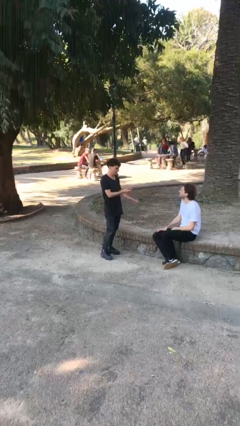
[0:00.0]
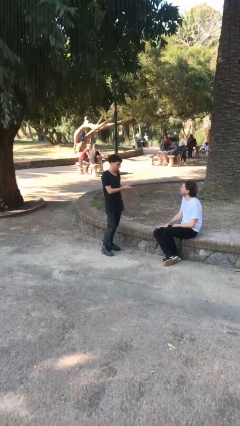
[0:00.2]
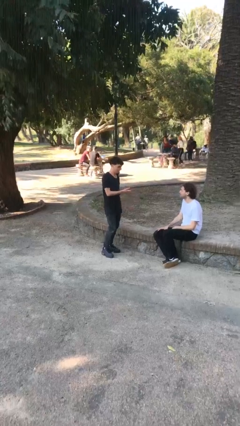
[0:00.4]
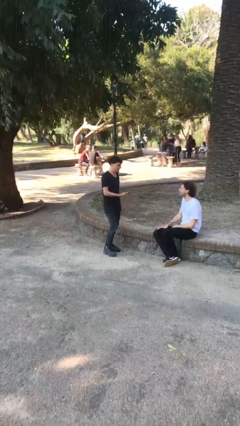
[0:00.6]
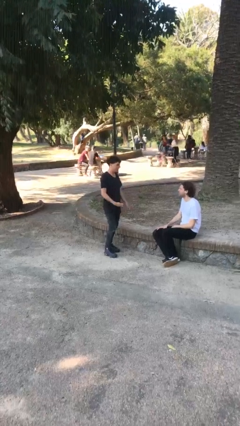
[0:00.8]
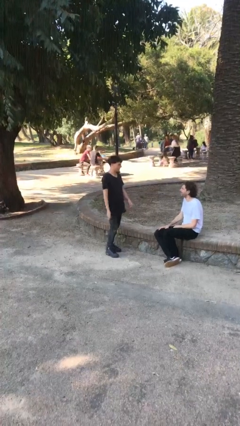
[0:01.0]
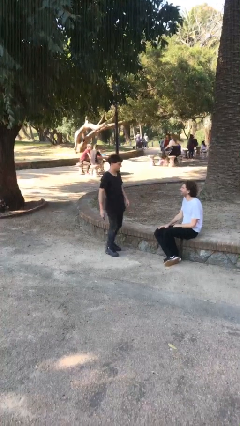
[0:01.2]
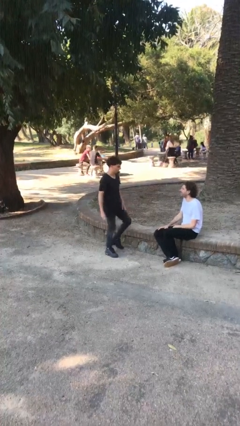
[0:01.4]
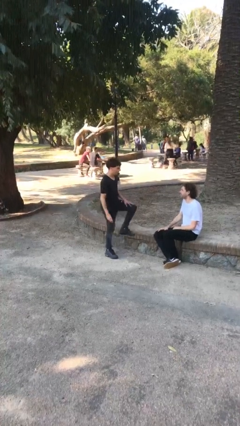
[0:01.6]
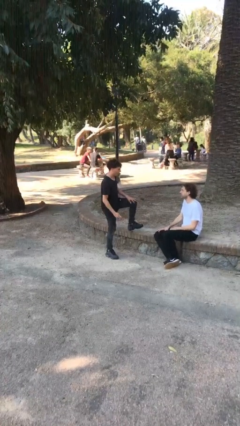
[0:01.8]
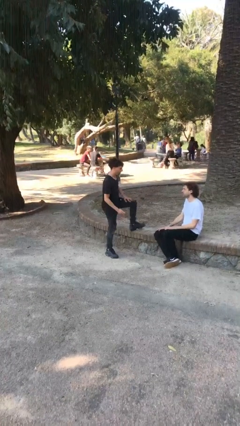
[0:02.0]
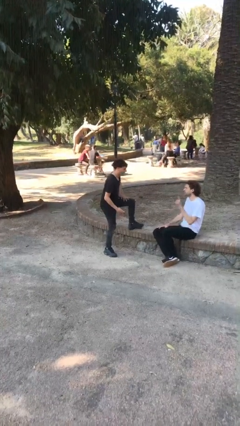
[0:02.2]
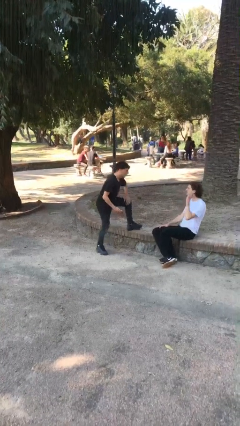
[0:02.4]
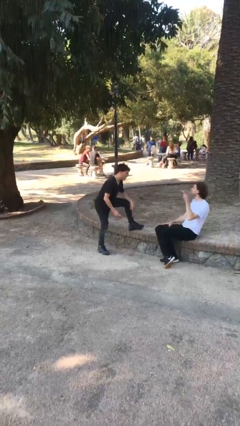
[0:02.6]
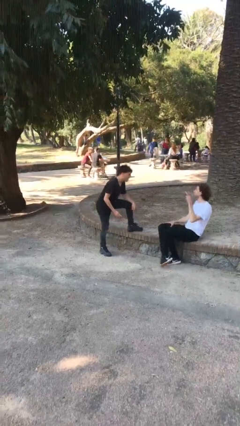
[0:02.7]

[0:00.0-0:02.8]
person talks to person

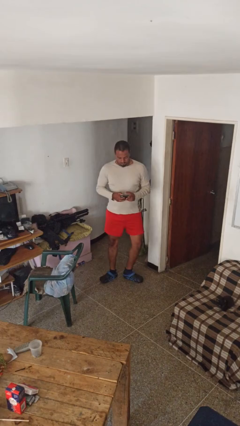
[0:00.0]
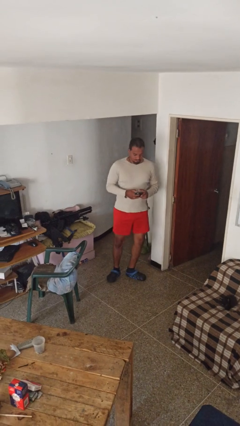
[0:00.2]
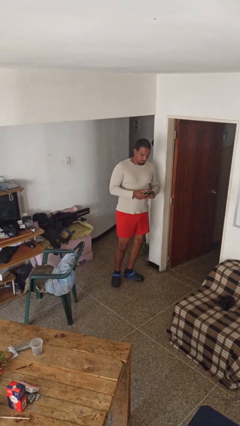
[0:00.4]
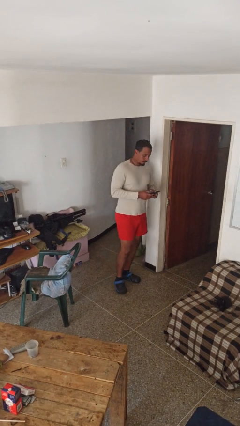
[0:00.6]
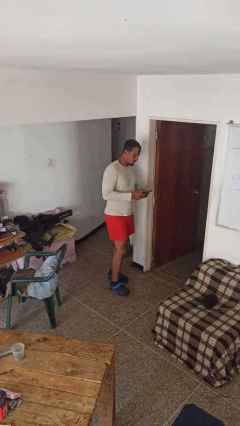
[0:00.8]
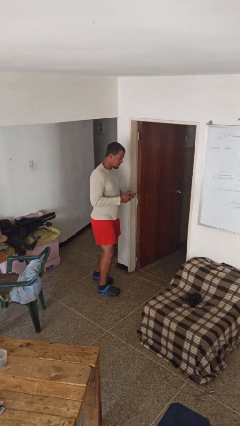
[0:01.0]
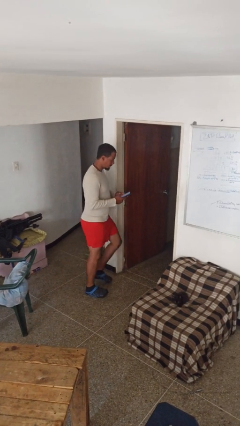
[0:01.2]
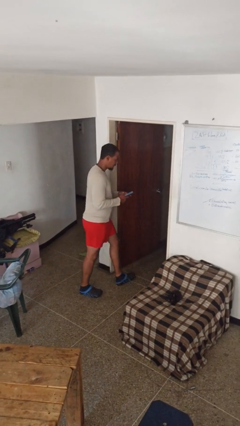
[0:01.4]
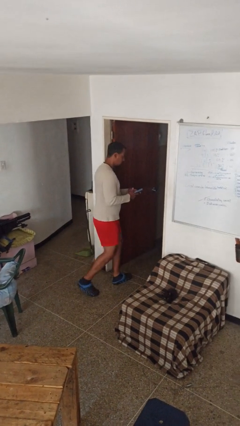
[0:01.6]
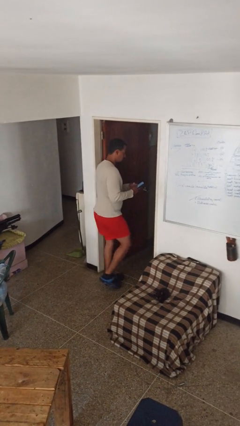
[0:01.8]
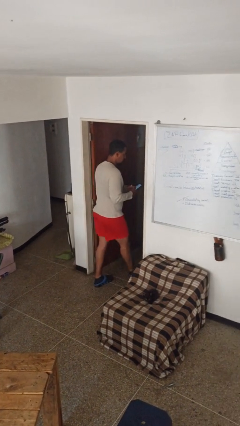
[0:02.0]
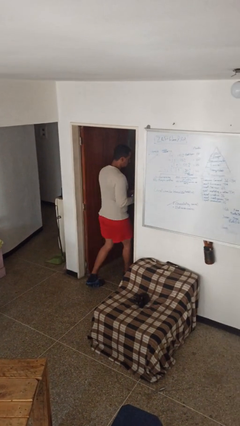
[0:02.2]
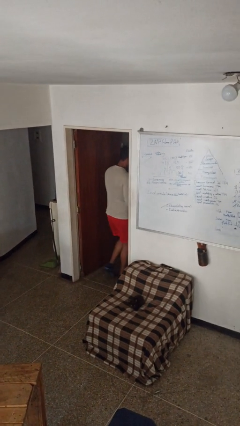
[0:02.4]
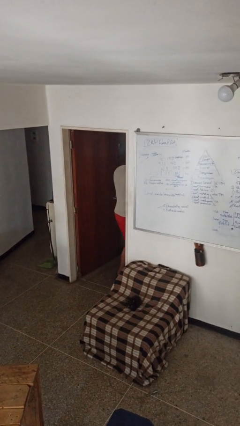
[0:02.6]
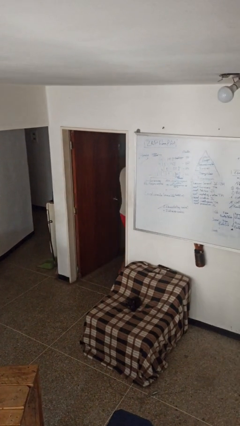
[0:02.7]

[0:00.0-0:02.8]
person exits scene through structure

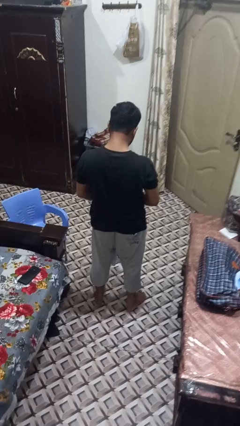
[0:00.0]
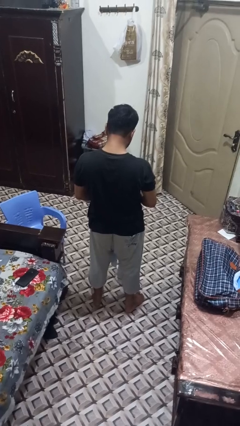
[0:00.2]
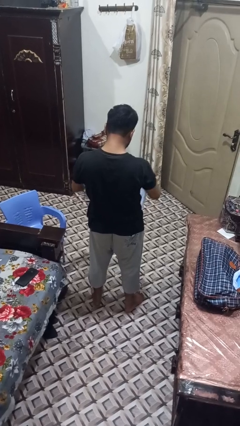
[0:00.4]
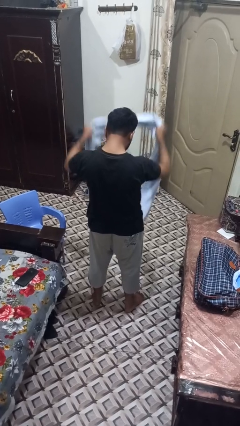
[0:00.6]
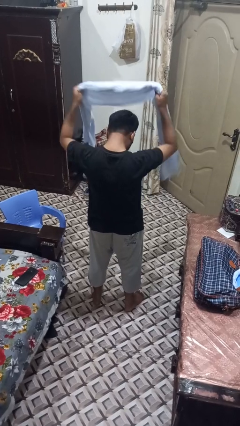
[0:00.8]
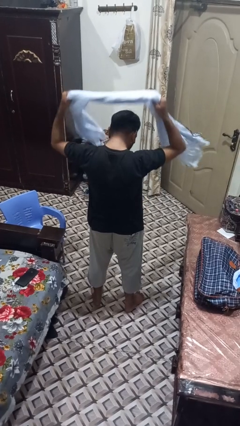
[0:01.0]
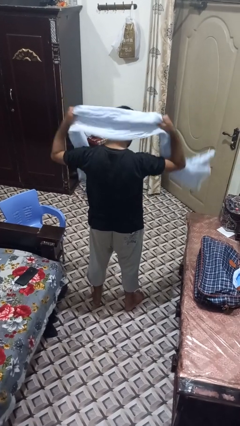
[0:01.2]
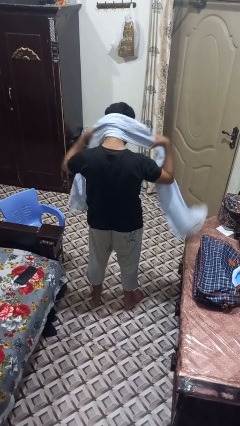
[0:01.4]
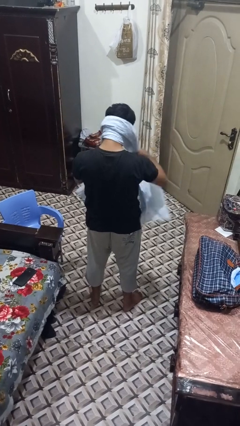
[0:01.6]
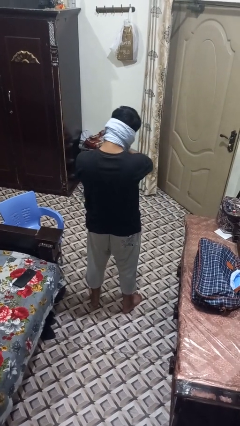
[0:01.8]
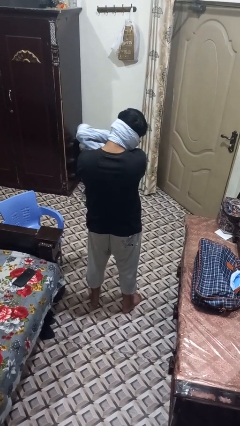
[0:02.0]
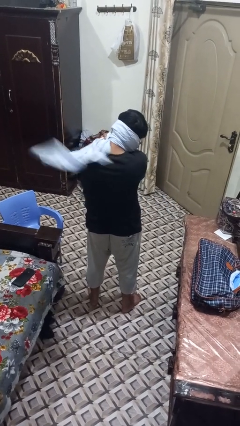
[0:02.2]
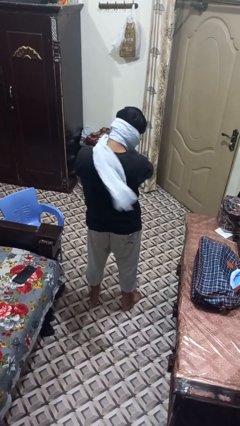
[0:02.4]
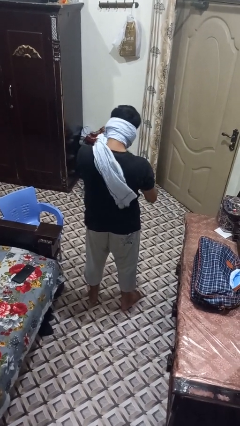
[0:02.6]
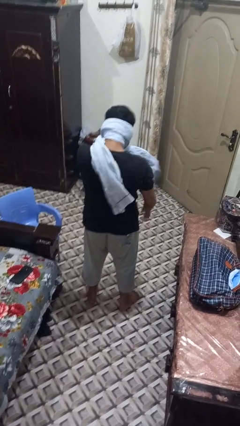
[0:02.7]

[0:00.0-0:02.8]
person puts on scarf

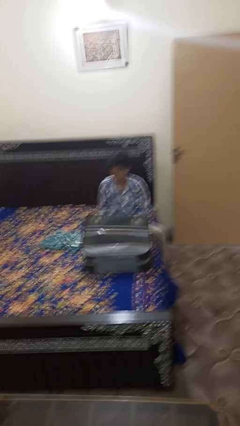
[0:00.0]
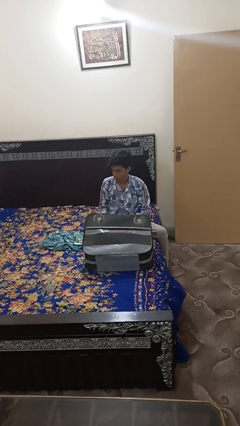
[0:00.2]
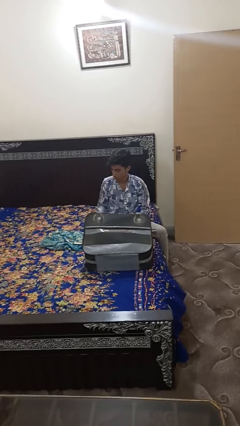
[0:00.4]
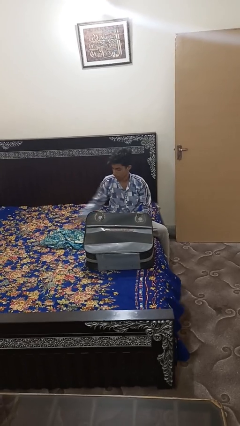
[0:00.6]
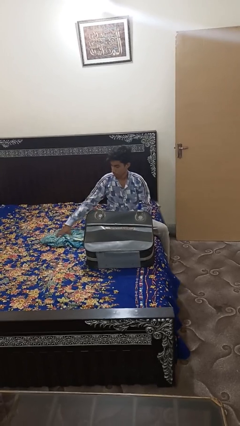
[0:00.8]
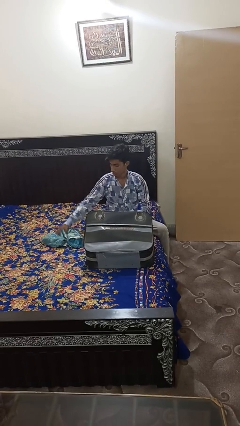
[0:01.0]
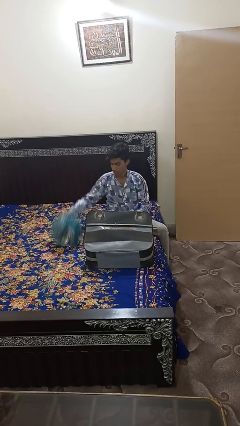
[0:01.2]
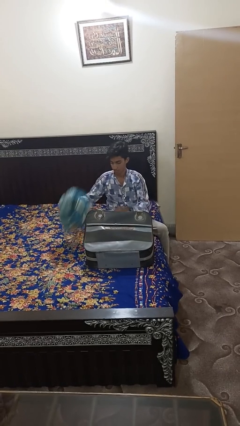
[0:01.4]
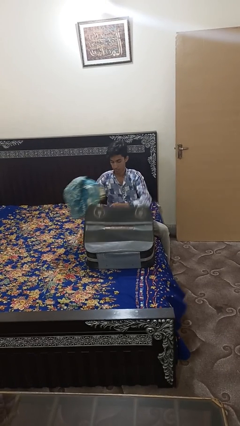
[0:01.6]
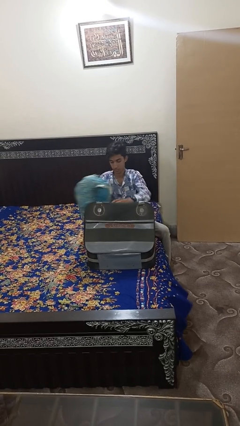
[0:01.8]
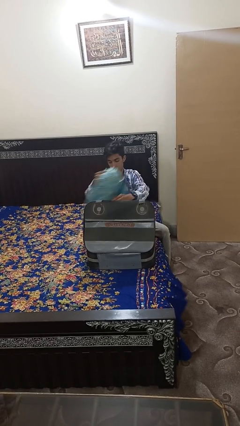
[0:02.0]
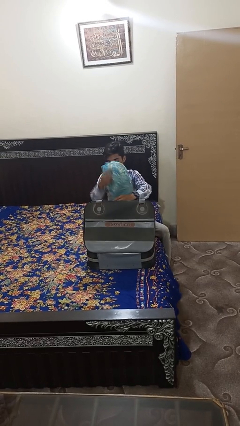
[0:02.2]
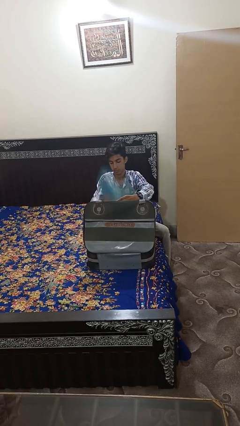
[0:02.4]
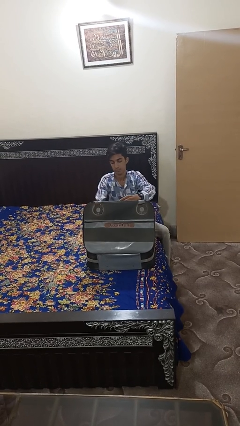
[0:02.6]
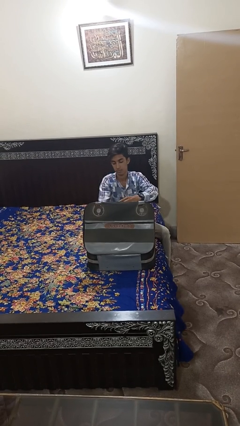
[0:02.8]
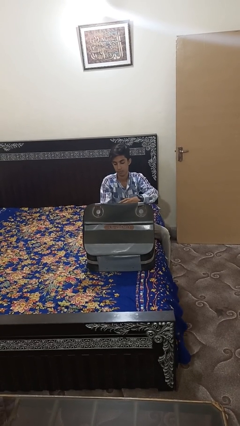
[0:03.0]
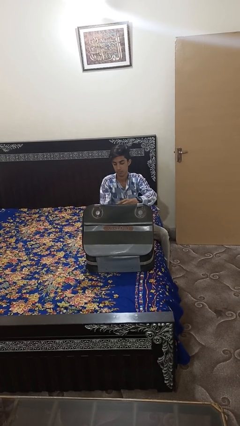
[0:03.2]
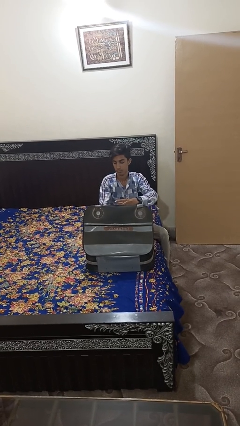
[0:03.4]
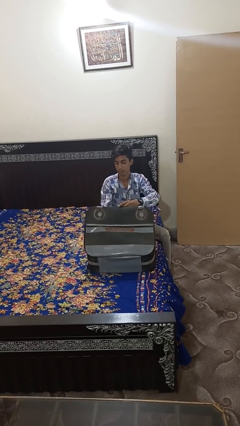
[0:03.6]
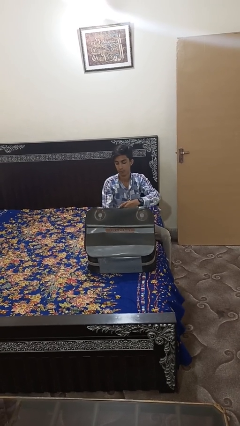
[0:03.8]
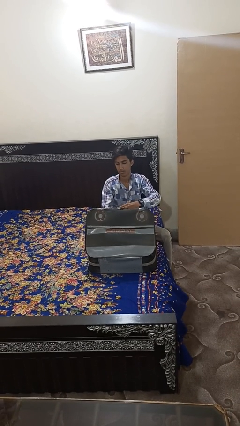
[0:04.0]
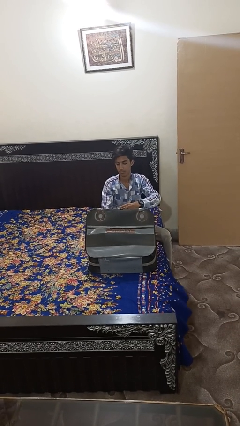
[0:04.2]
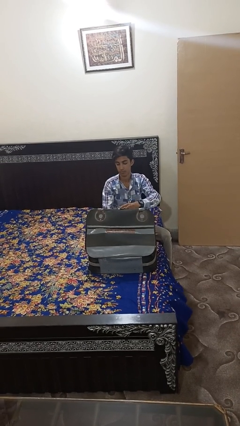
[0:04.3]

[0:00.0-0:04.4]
person loads clothes into suitcase

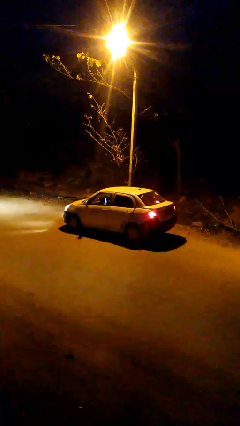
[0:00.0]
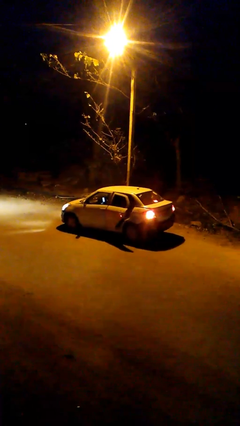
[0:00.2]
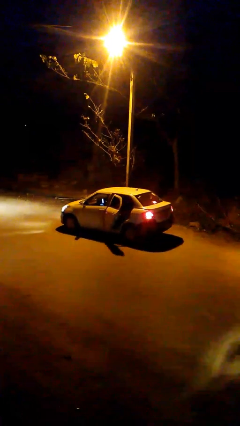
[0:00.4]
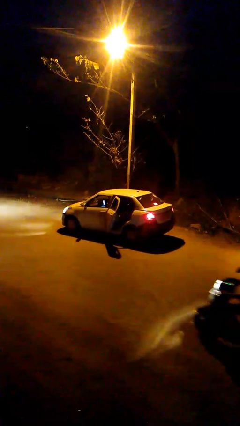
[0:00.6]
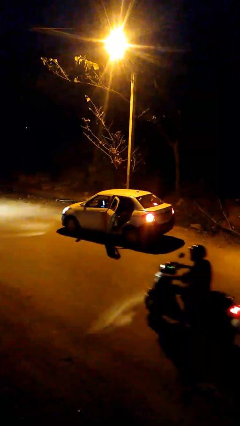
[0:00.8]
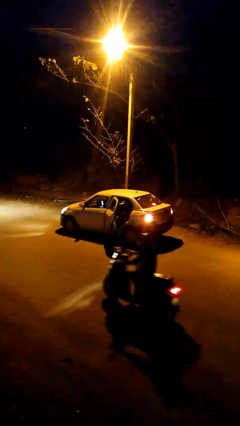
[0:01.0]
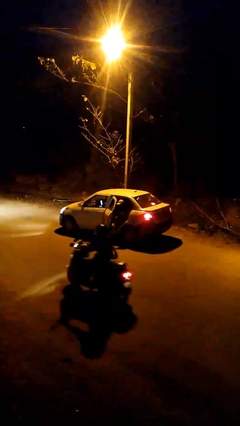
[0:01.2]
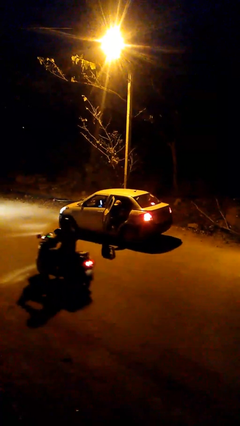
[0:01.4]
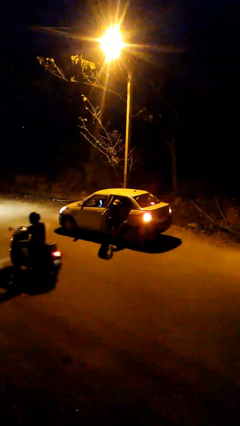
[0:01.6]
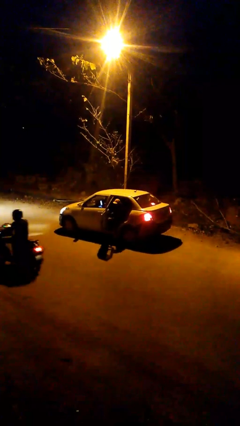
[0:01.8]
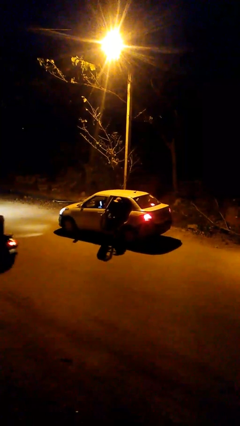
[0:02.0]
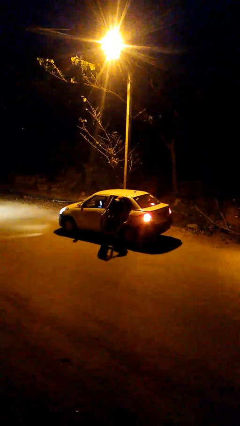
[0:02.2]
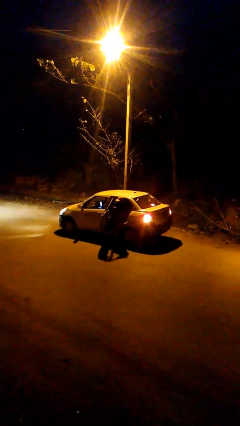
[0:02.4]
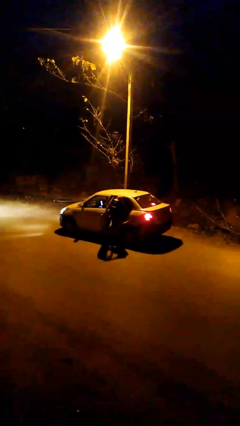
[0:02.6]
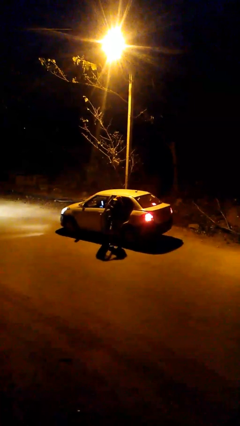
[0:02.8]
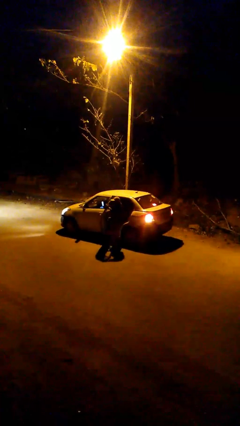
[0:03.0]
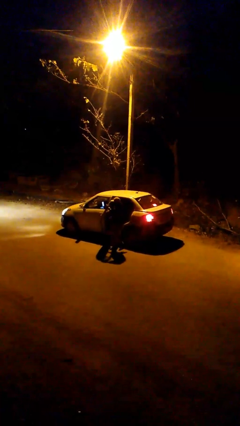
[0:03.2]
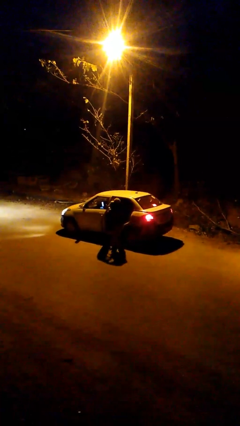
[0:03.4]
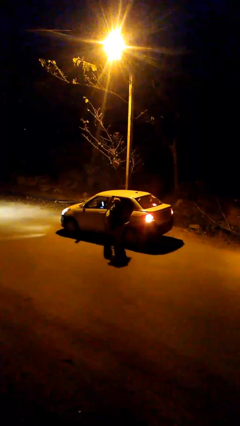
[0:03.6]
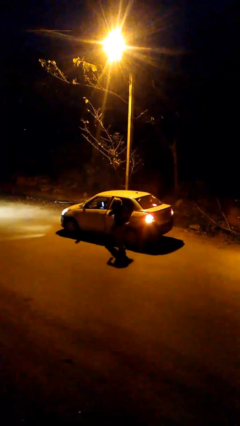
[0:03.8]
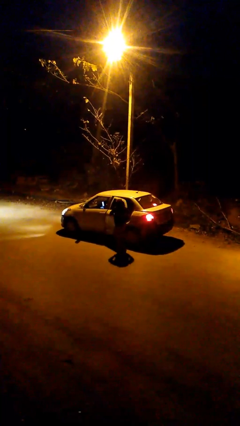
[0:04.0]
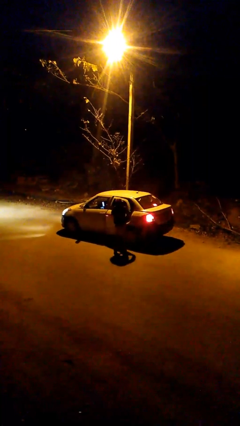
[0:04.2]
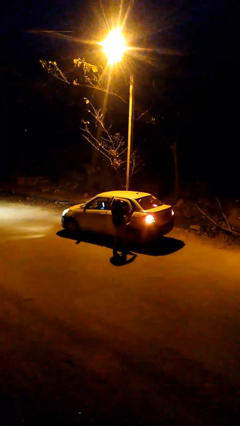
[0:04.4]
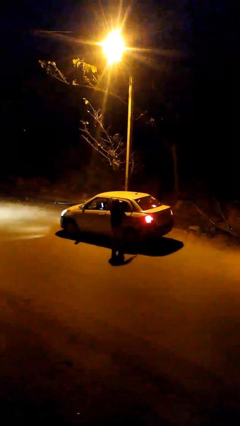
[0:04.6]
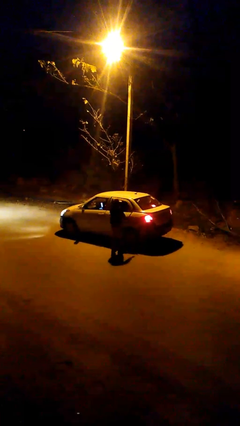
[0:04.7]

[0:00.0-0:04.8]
car drops off person

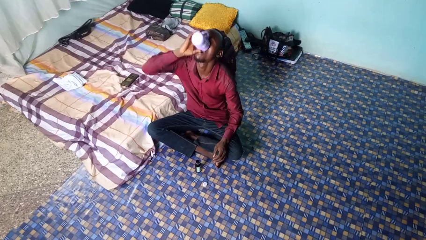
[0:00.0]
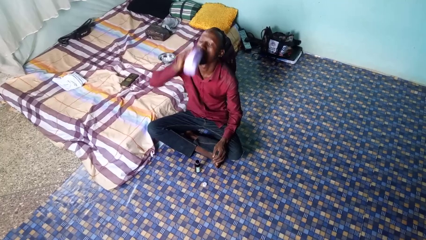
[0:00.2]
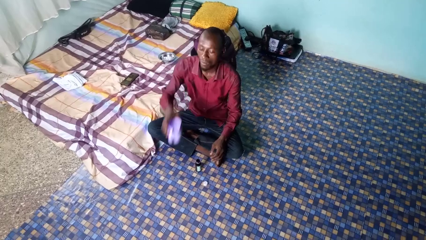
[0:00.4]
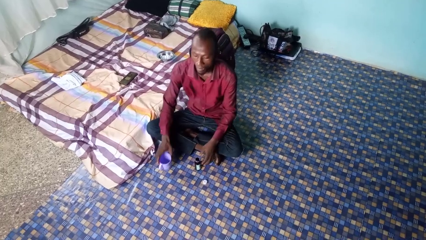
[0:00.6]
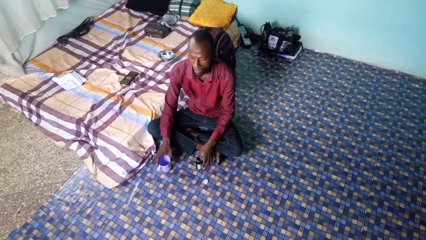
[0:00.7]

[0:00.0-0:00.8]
person drinks from cup
